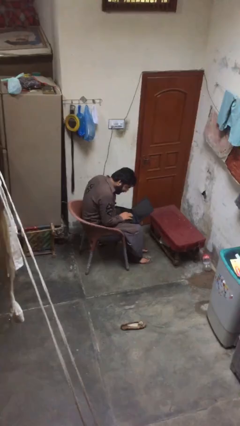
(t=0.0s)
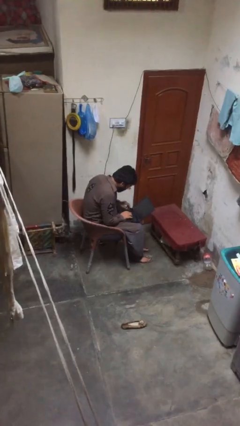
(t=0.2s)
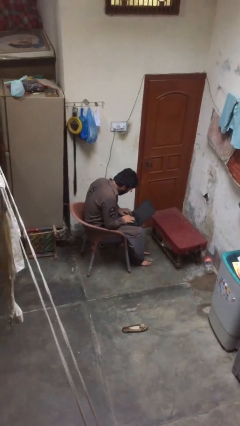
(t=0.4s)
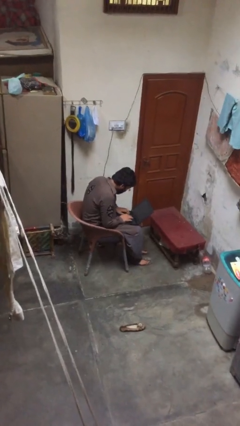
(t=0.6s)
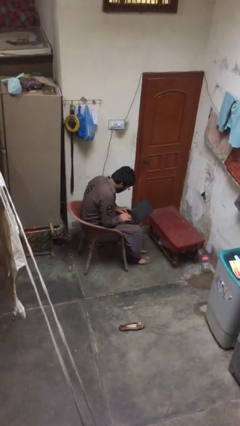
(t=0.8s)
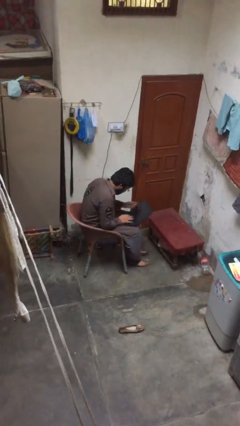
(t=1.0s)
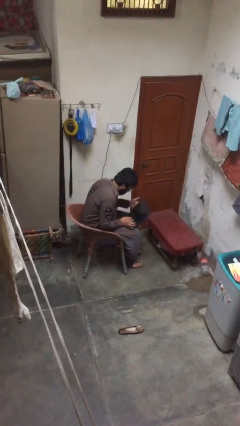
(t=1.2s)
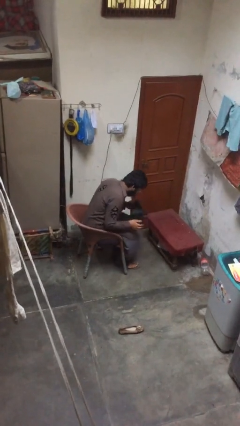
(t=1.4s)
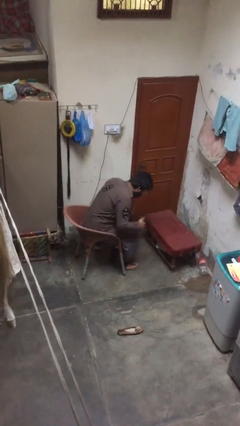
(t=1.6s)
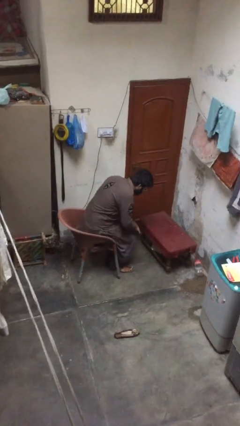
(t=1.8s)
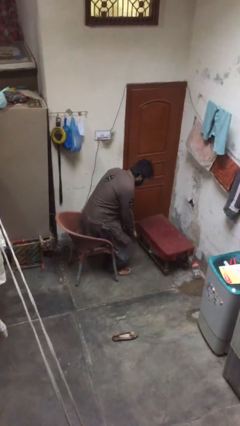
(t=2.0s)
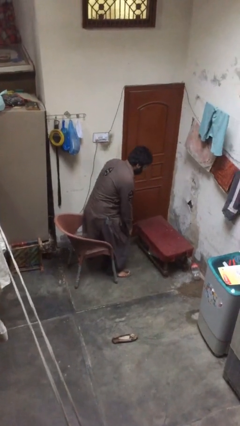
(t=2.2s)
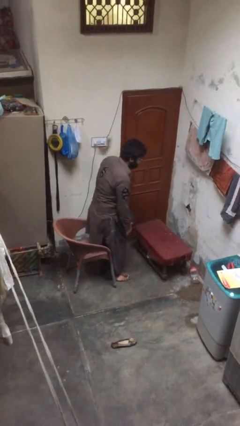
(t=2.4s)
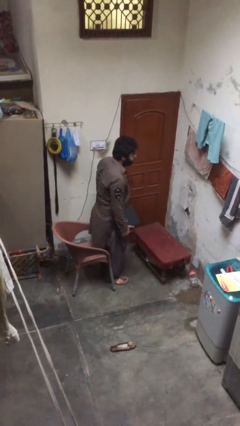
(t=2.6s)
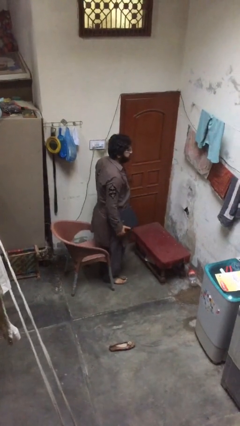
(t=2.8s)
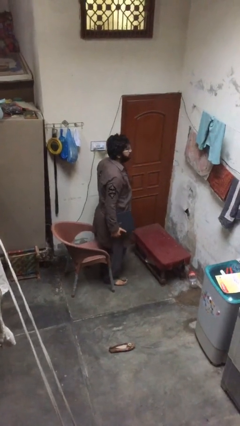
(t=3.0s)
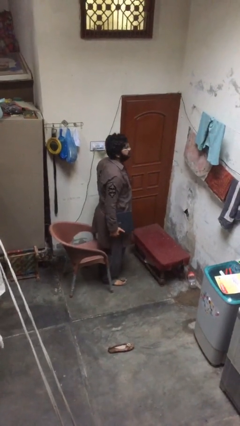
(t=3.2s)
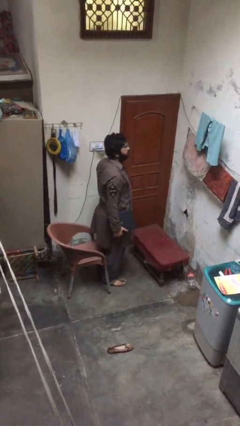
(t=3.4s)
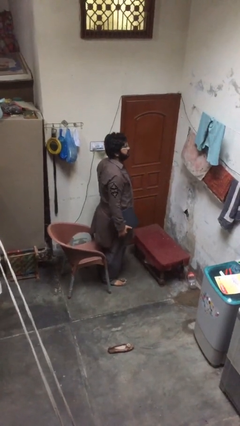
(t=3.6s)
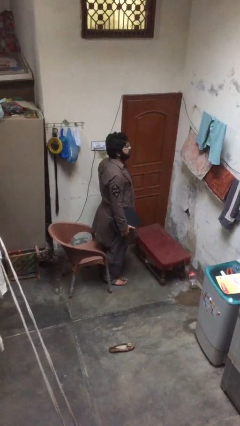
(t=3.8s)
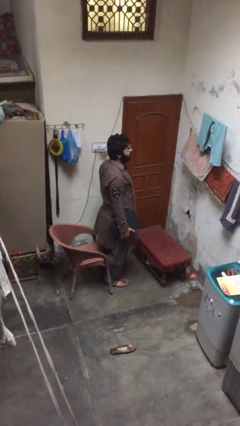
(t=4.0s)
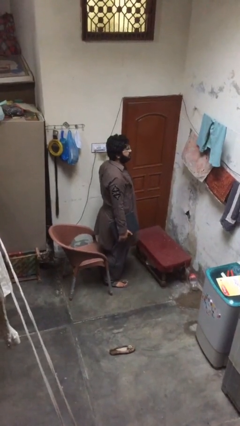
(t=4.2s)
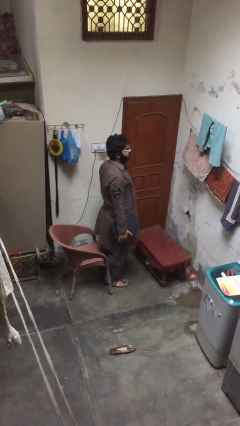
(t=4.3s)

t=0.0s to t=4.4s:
person stands up

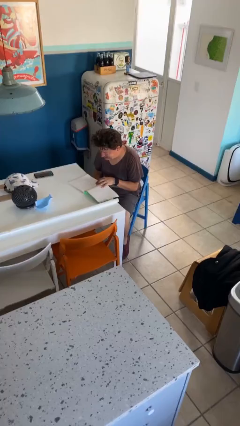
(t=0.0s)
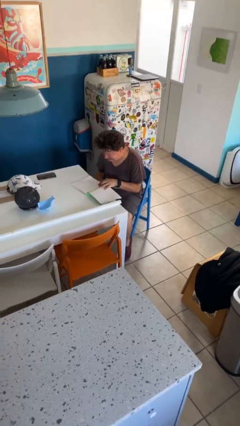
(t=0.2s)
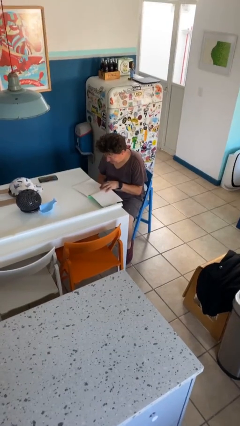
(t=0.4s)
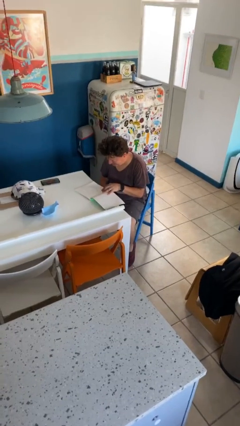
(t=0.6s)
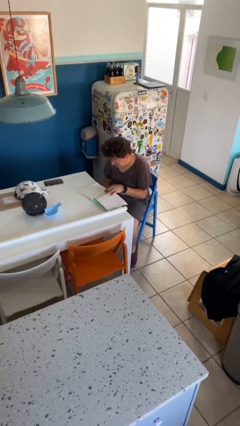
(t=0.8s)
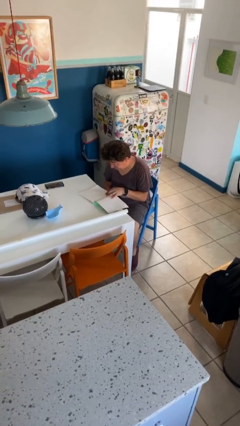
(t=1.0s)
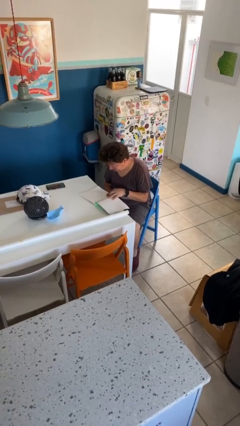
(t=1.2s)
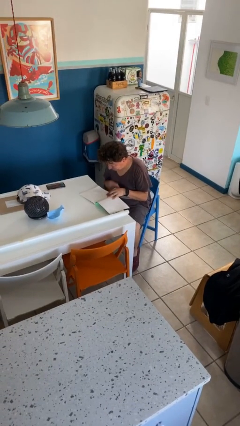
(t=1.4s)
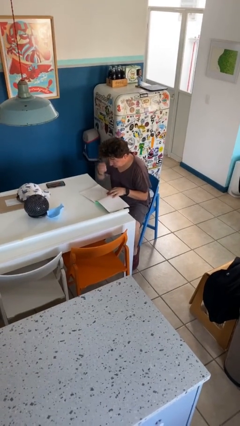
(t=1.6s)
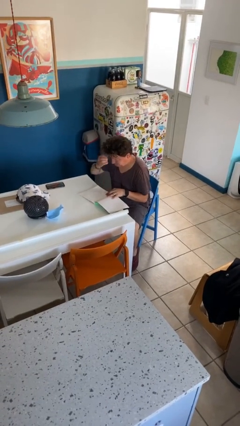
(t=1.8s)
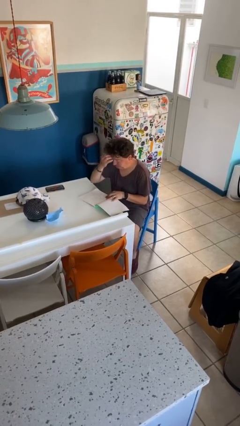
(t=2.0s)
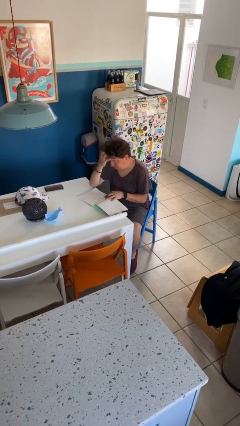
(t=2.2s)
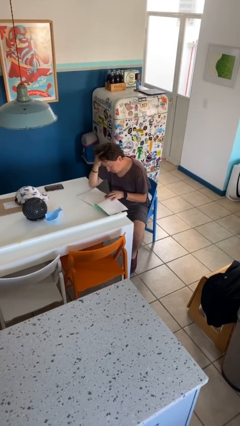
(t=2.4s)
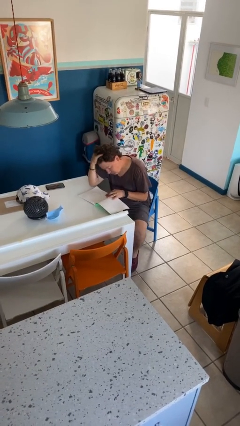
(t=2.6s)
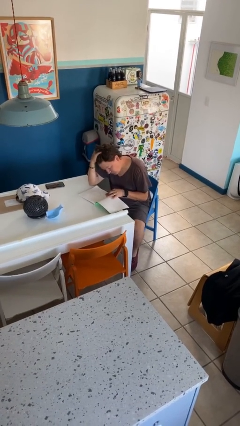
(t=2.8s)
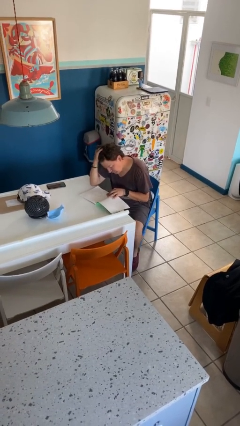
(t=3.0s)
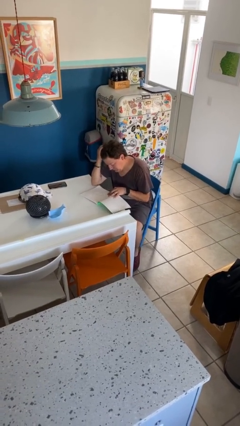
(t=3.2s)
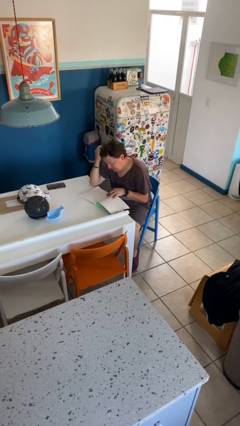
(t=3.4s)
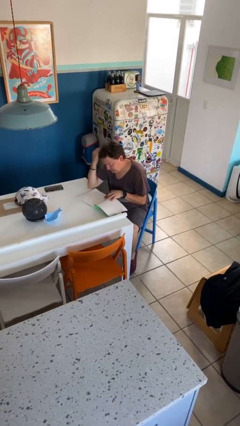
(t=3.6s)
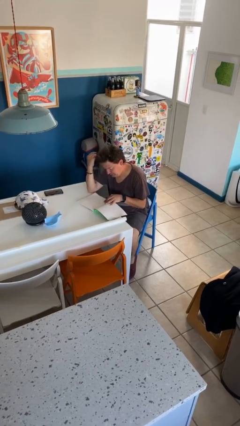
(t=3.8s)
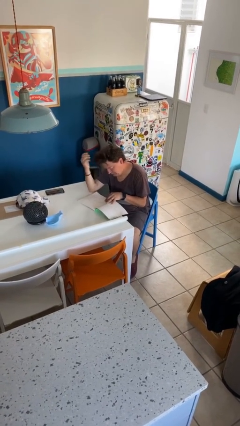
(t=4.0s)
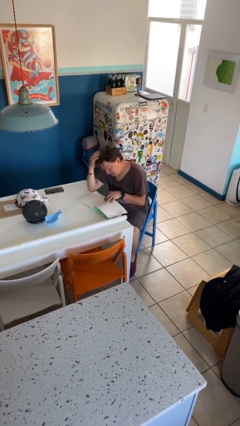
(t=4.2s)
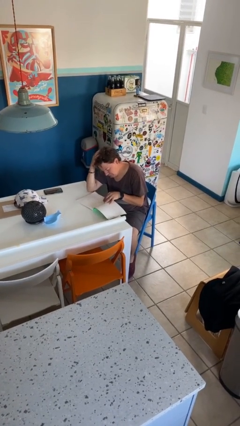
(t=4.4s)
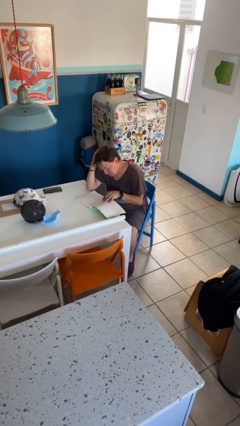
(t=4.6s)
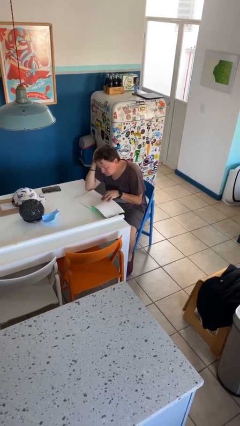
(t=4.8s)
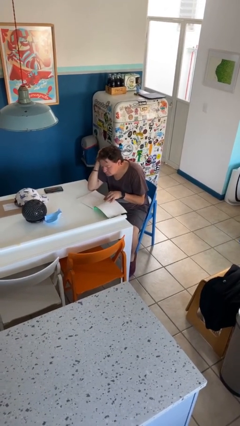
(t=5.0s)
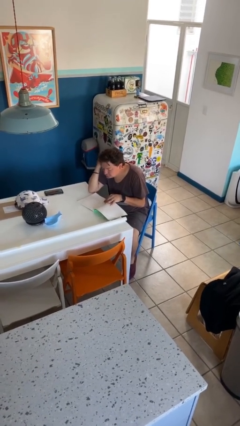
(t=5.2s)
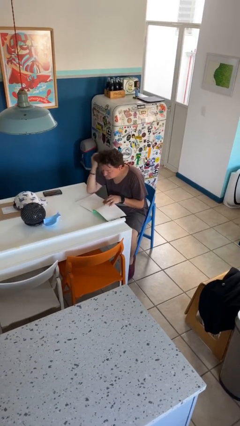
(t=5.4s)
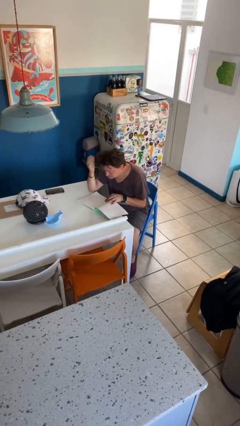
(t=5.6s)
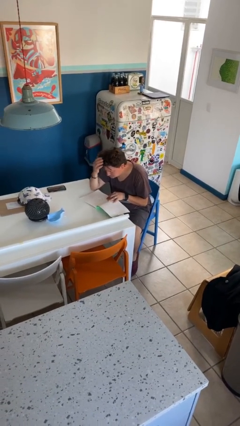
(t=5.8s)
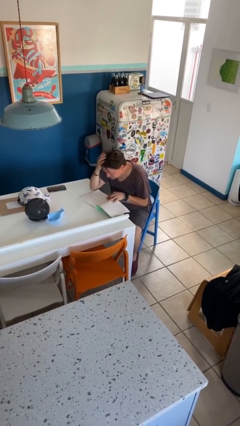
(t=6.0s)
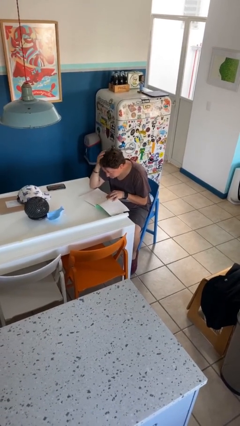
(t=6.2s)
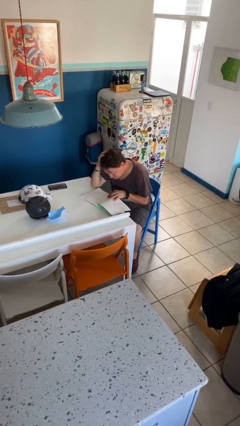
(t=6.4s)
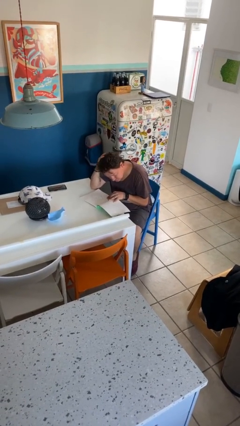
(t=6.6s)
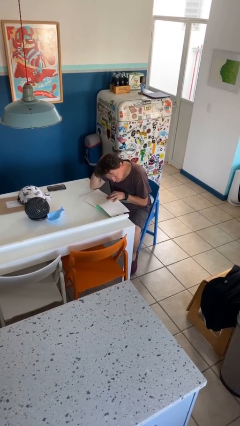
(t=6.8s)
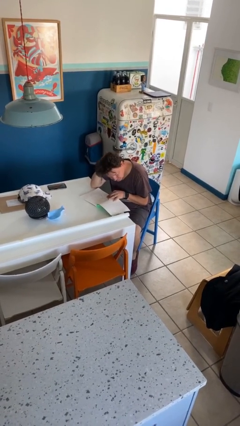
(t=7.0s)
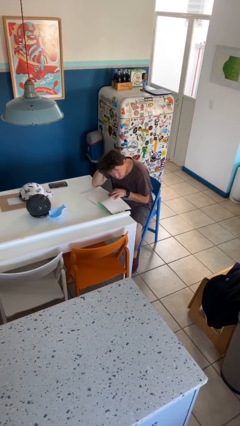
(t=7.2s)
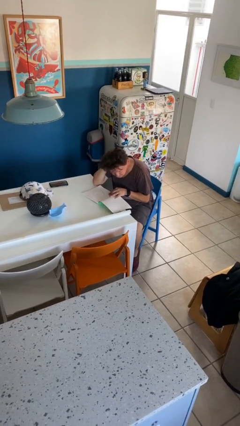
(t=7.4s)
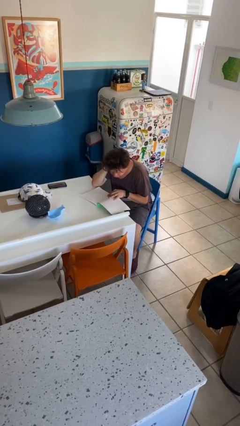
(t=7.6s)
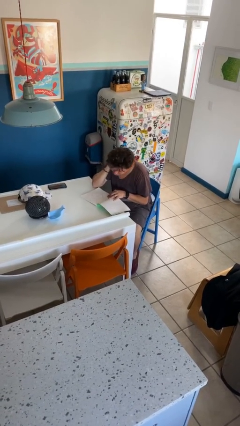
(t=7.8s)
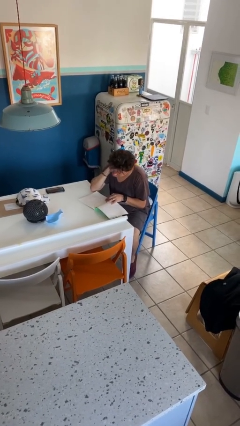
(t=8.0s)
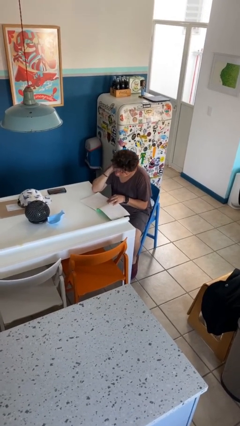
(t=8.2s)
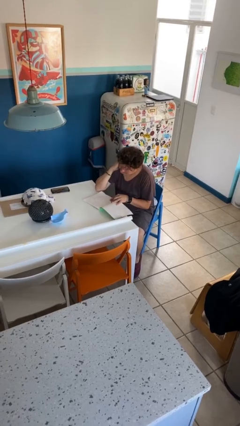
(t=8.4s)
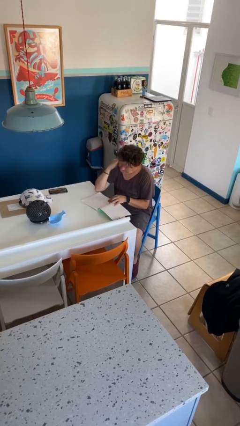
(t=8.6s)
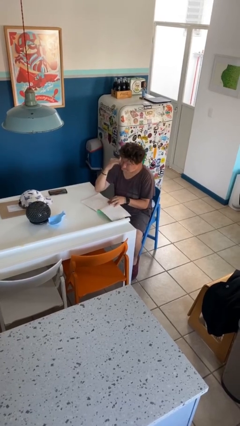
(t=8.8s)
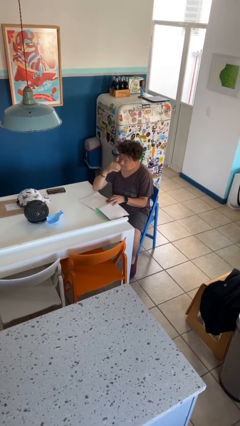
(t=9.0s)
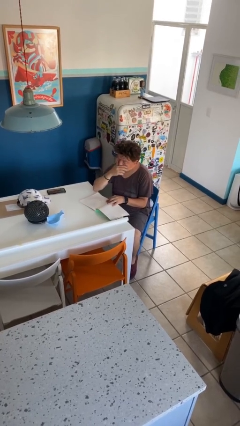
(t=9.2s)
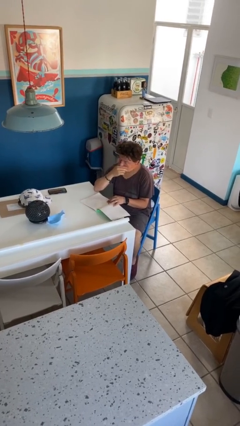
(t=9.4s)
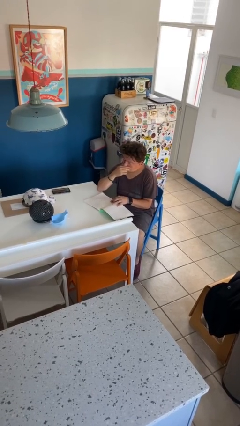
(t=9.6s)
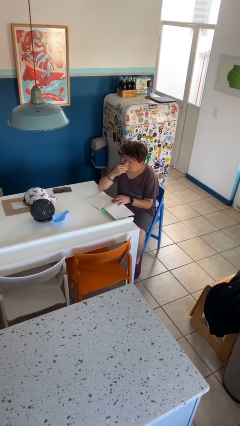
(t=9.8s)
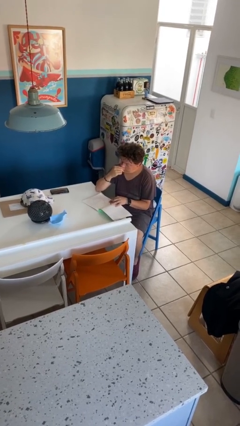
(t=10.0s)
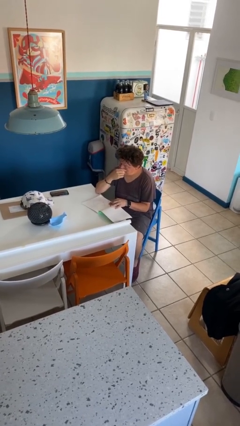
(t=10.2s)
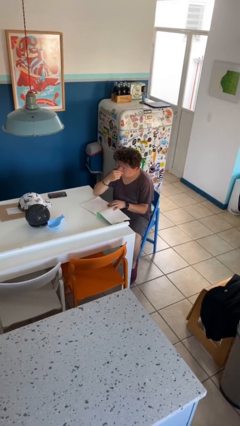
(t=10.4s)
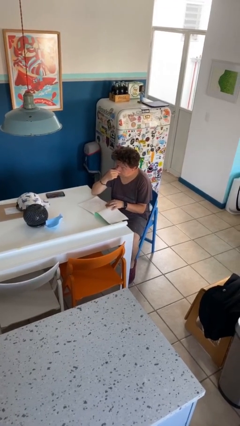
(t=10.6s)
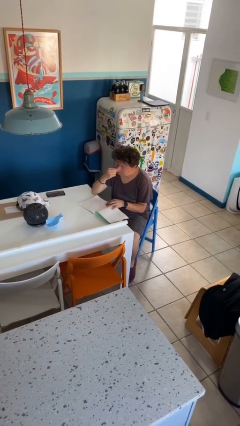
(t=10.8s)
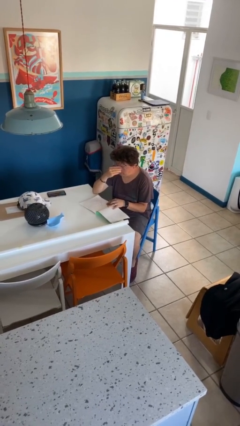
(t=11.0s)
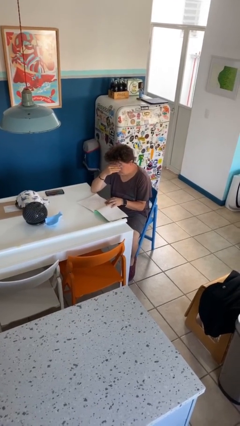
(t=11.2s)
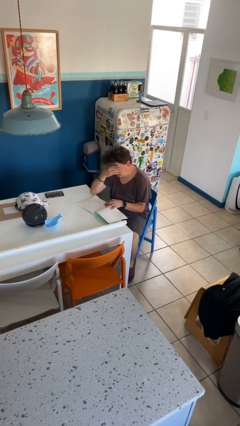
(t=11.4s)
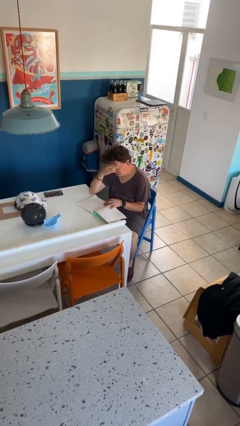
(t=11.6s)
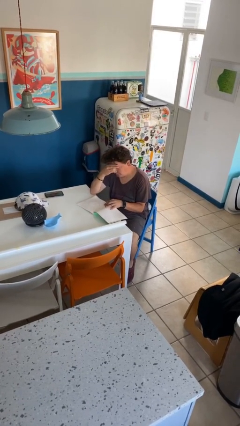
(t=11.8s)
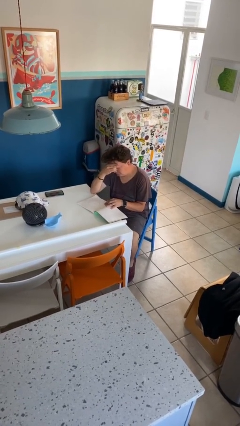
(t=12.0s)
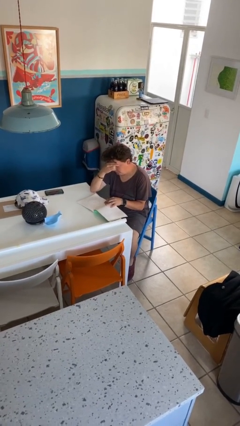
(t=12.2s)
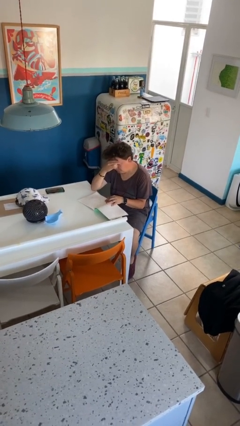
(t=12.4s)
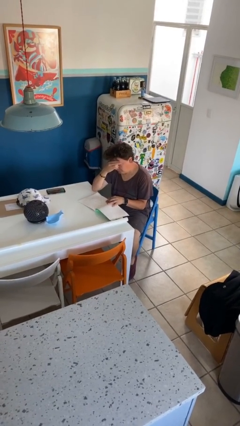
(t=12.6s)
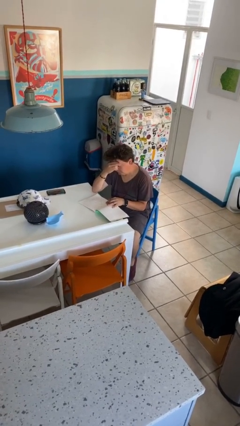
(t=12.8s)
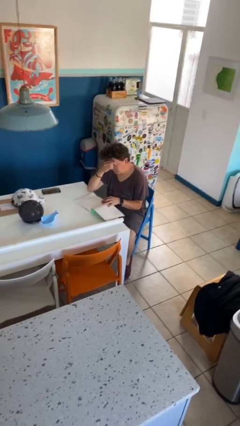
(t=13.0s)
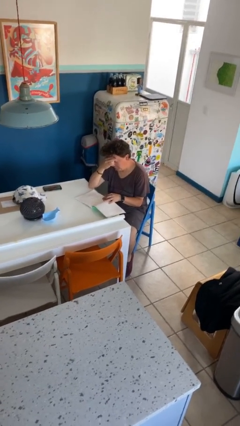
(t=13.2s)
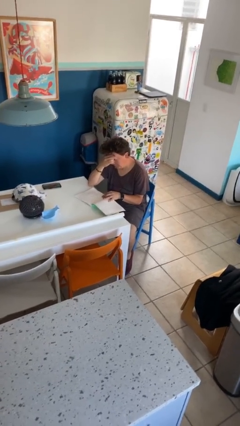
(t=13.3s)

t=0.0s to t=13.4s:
person reads document

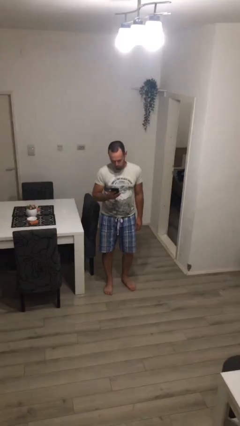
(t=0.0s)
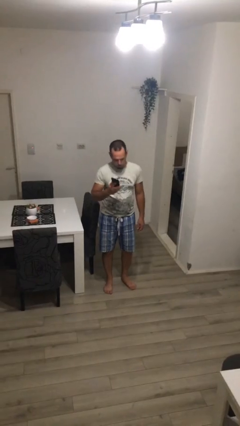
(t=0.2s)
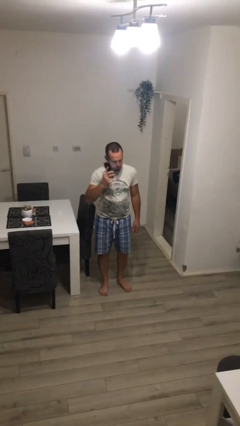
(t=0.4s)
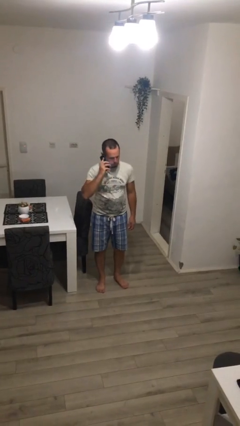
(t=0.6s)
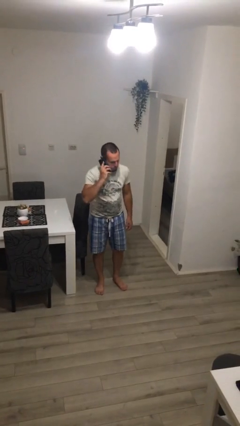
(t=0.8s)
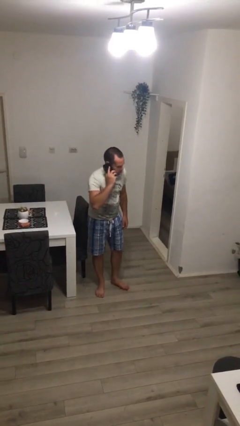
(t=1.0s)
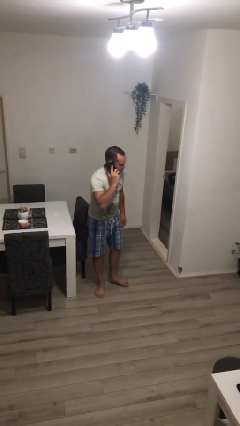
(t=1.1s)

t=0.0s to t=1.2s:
person talks on phone
